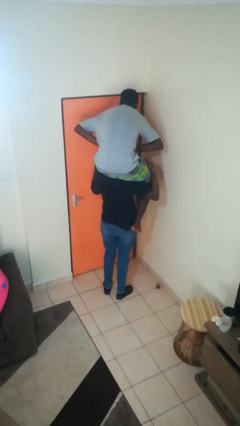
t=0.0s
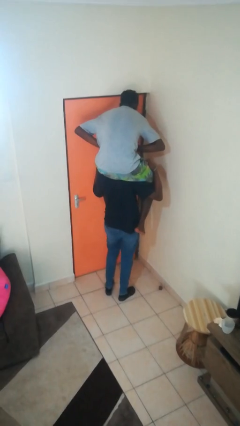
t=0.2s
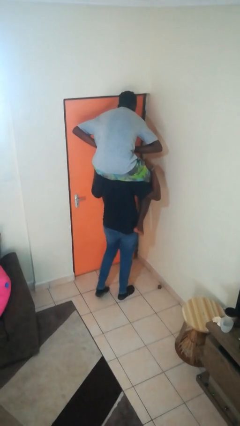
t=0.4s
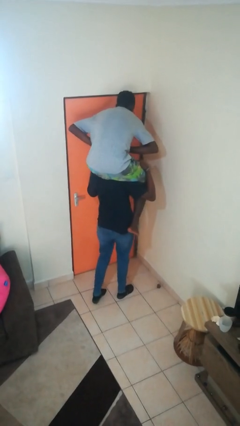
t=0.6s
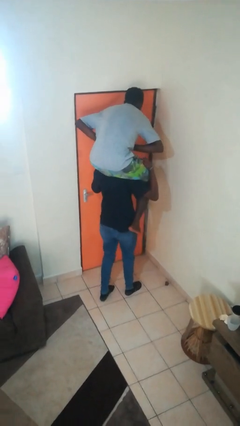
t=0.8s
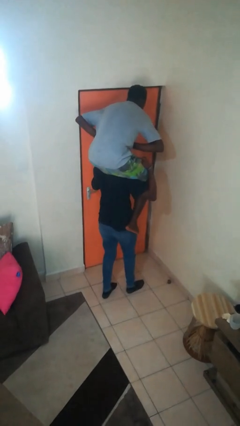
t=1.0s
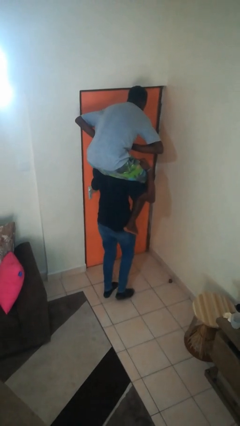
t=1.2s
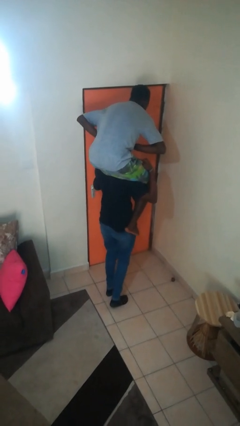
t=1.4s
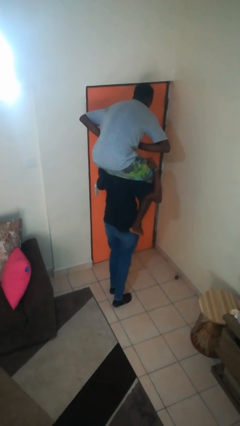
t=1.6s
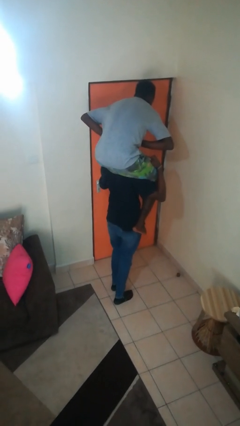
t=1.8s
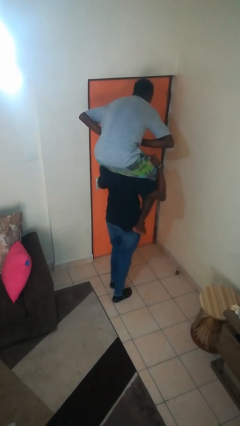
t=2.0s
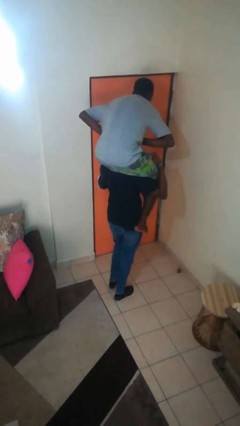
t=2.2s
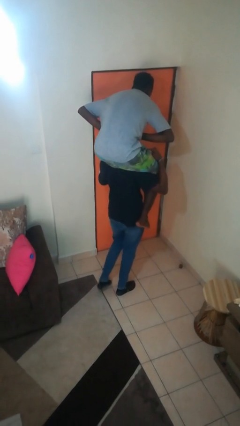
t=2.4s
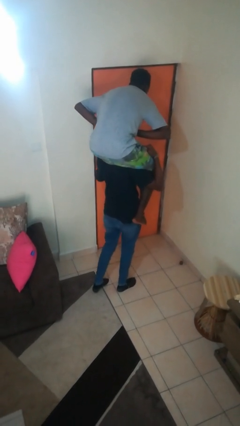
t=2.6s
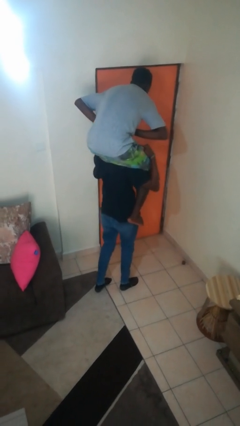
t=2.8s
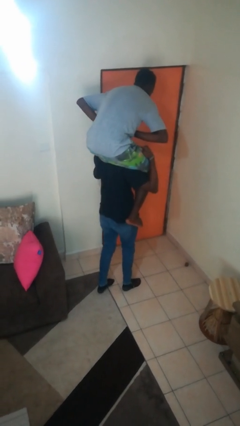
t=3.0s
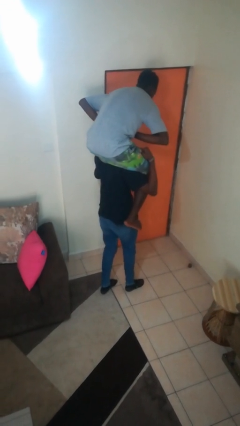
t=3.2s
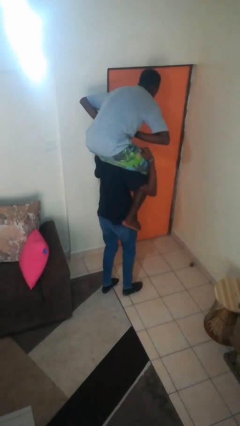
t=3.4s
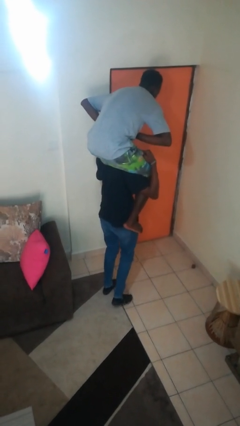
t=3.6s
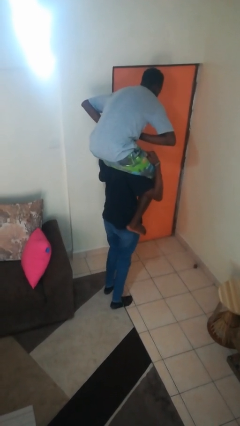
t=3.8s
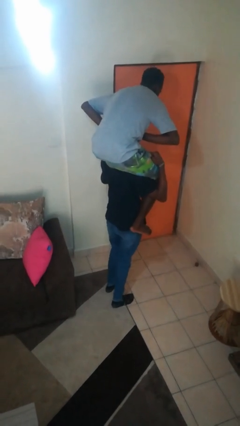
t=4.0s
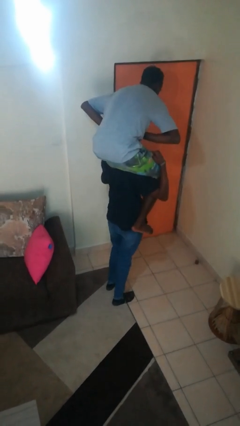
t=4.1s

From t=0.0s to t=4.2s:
person carries person on shoulders

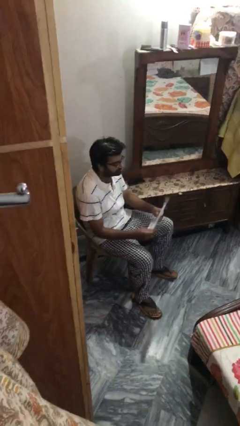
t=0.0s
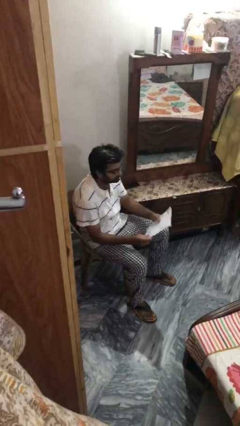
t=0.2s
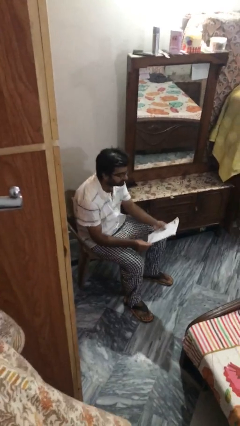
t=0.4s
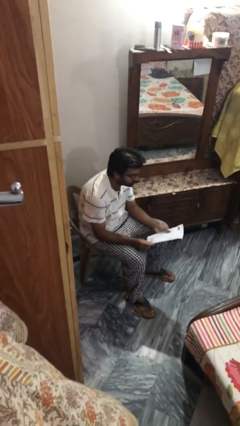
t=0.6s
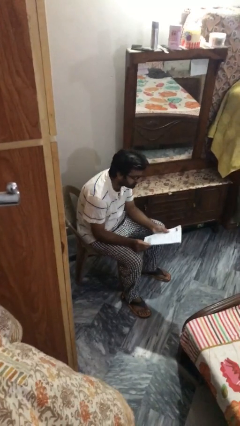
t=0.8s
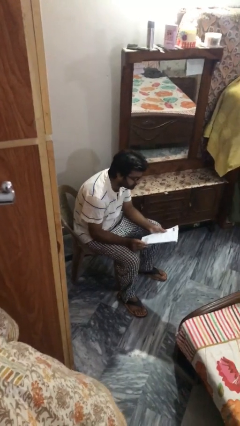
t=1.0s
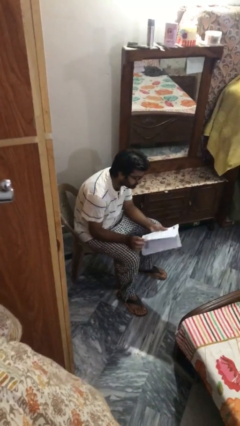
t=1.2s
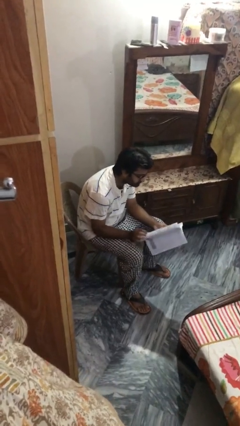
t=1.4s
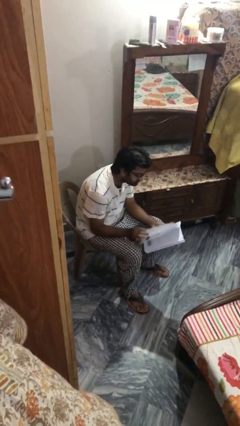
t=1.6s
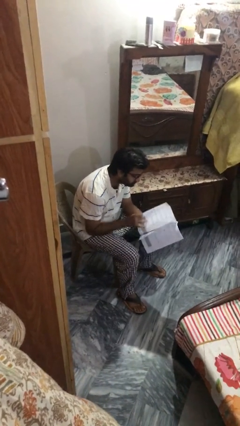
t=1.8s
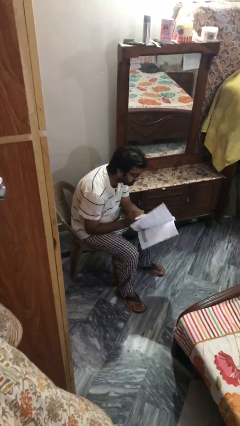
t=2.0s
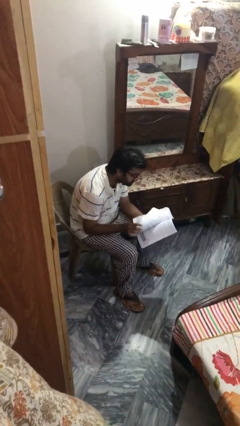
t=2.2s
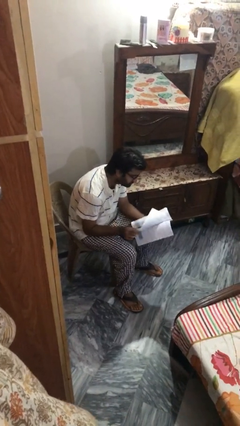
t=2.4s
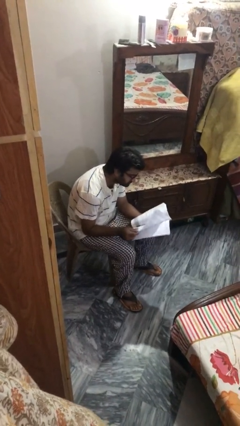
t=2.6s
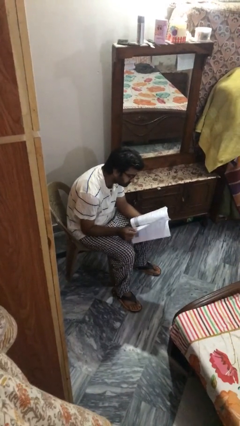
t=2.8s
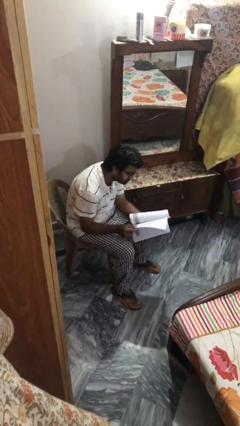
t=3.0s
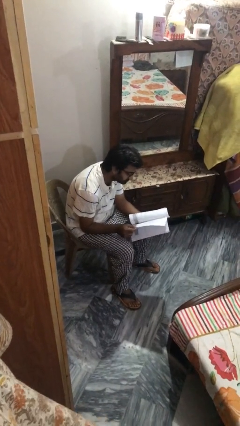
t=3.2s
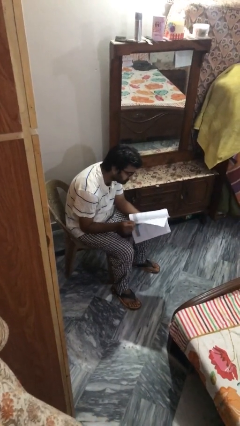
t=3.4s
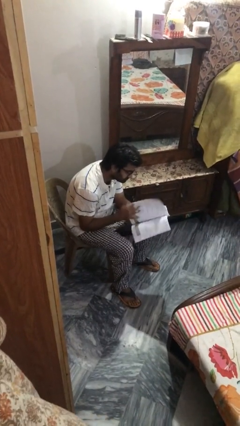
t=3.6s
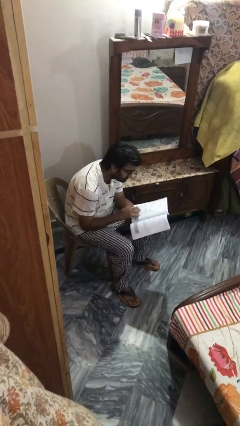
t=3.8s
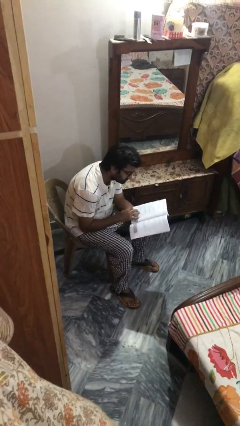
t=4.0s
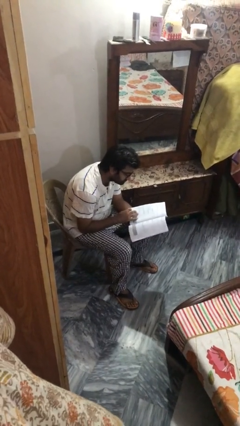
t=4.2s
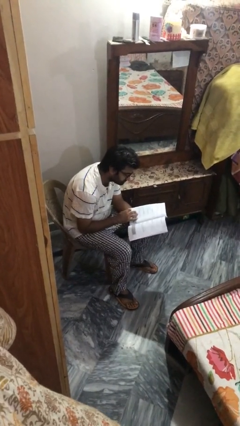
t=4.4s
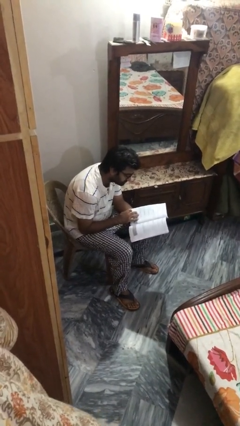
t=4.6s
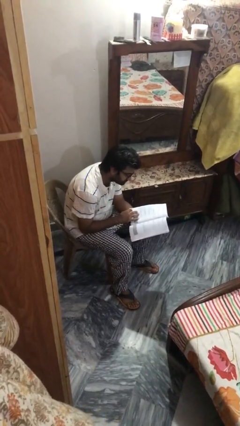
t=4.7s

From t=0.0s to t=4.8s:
person reads document

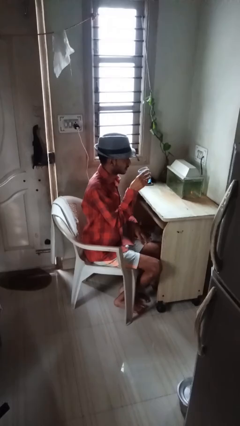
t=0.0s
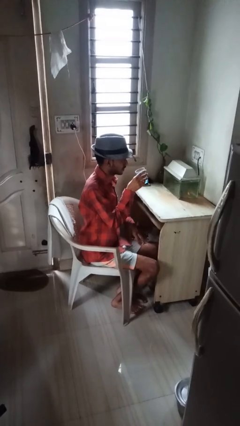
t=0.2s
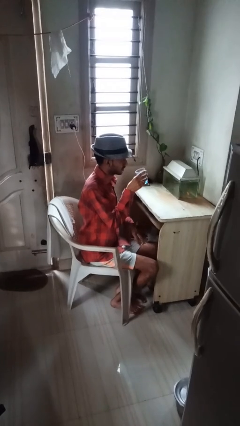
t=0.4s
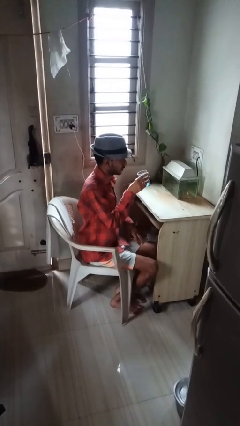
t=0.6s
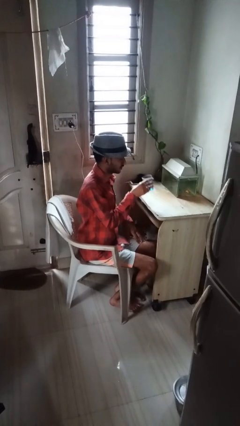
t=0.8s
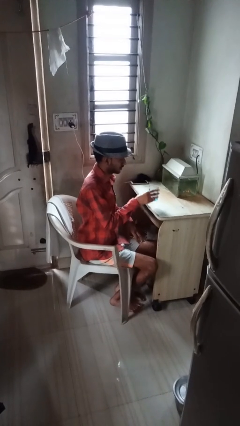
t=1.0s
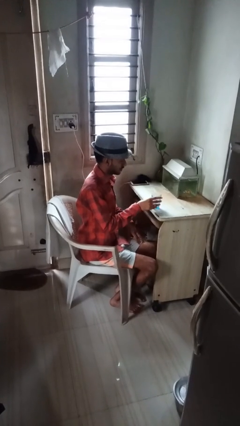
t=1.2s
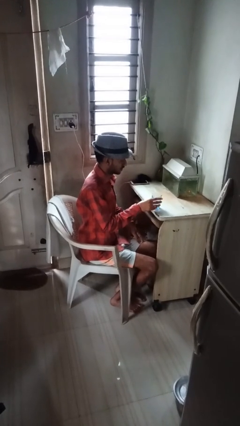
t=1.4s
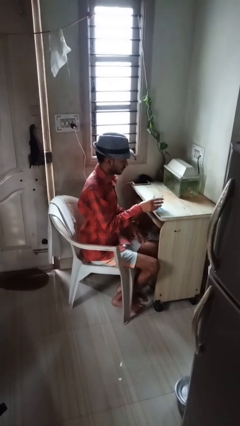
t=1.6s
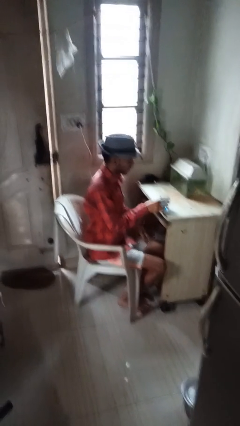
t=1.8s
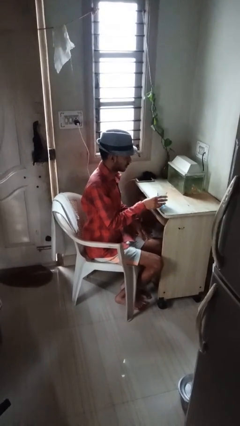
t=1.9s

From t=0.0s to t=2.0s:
person puts down object on table

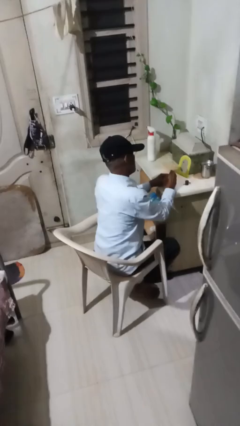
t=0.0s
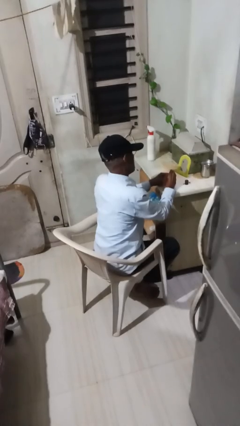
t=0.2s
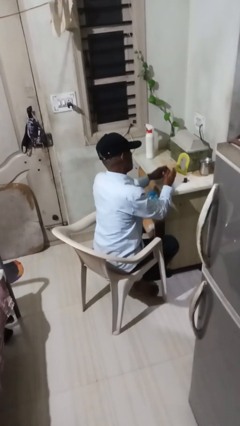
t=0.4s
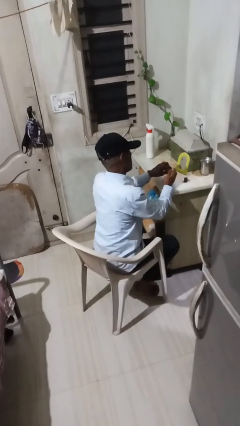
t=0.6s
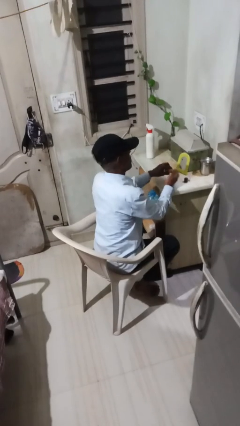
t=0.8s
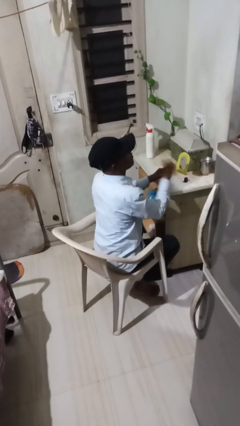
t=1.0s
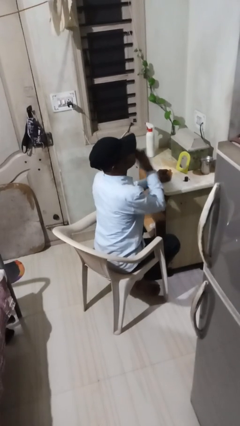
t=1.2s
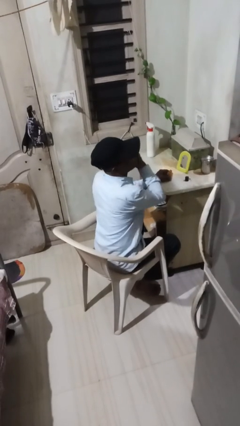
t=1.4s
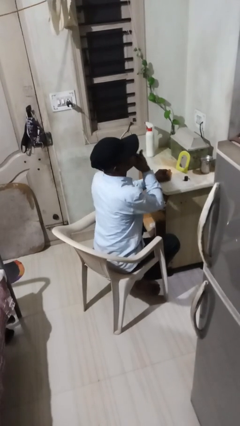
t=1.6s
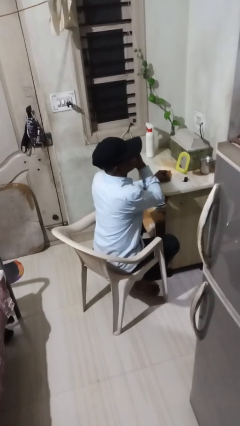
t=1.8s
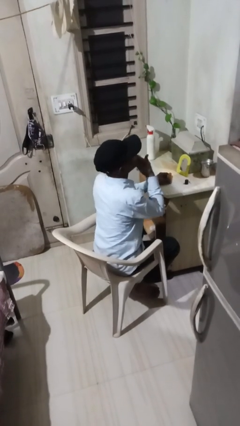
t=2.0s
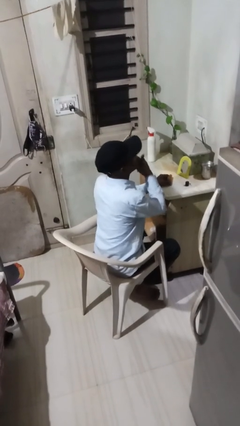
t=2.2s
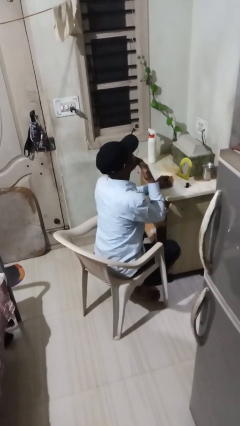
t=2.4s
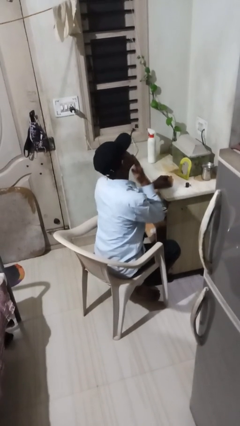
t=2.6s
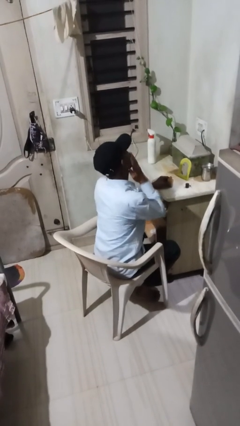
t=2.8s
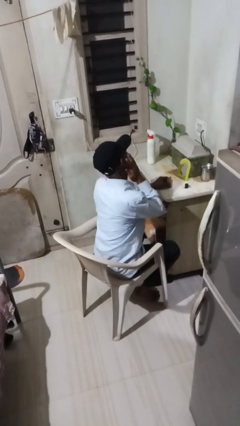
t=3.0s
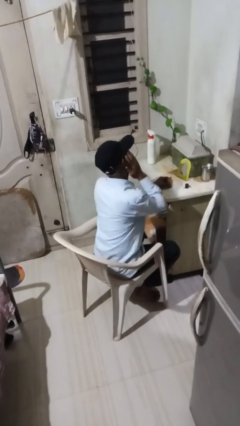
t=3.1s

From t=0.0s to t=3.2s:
person applies foundation makeup

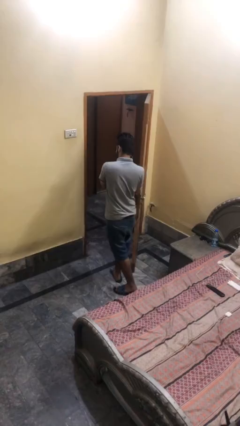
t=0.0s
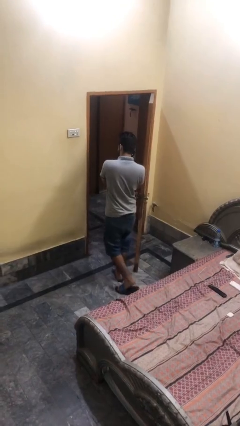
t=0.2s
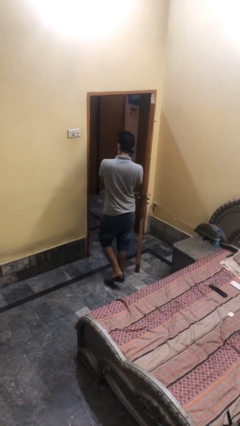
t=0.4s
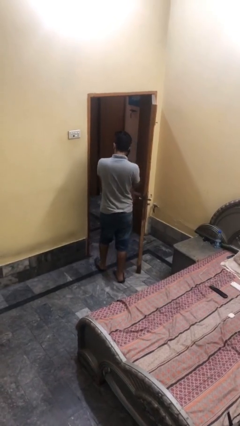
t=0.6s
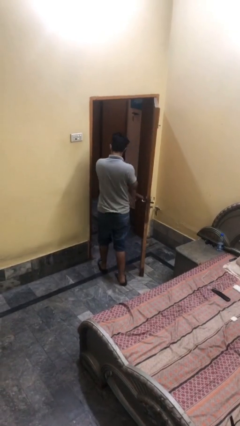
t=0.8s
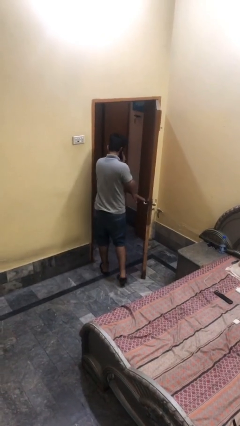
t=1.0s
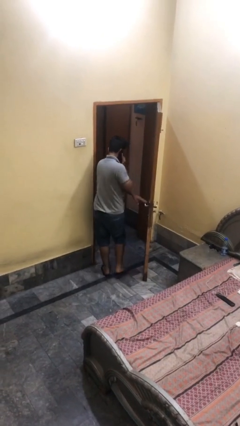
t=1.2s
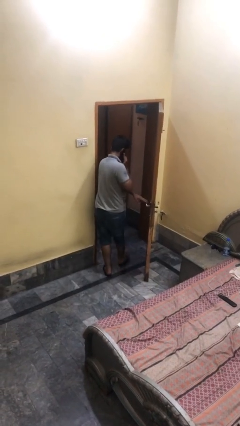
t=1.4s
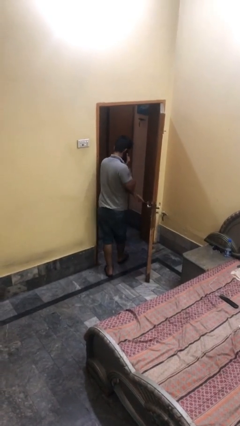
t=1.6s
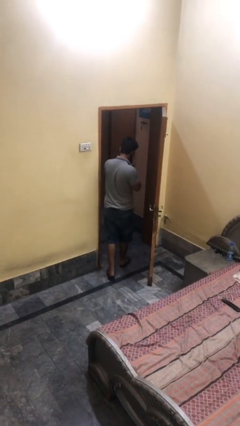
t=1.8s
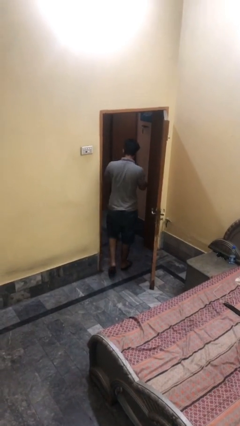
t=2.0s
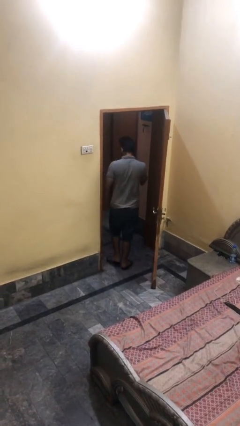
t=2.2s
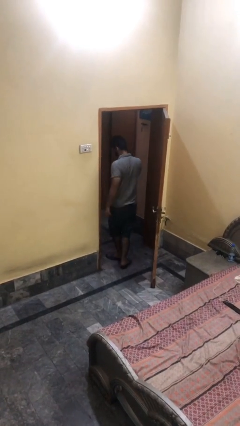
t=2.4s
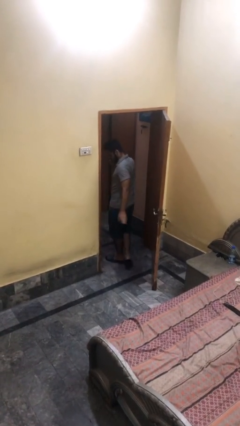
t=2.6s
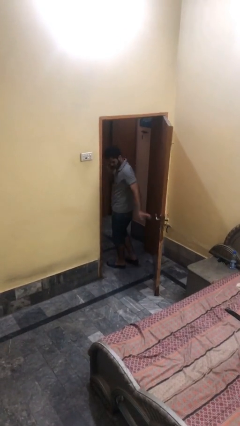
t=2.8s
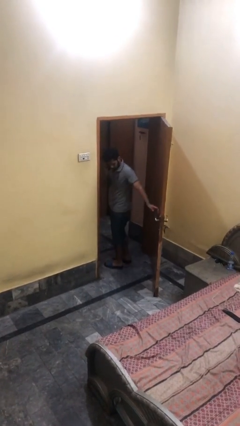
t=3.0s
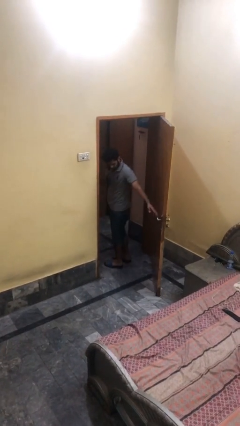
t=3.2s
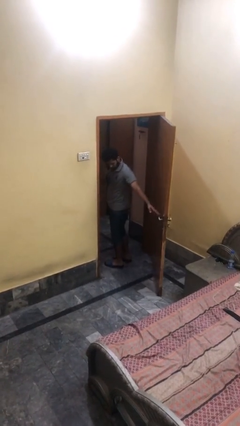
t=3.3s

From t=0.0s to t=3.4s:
person exits scene through structure
